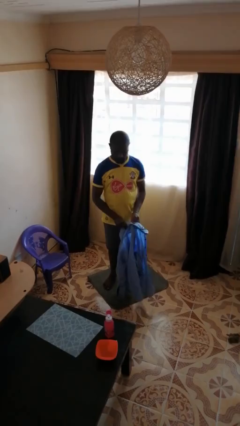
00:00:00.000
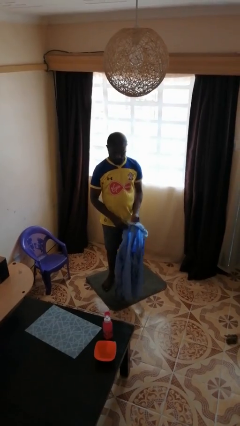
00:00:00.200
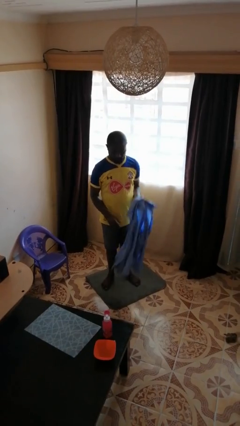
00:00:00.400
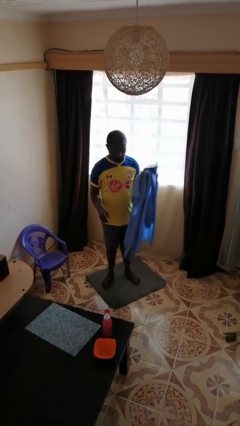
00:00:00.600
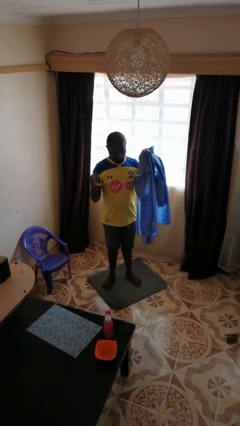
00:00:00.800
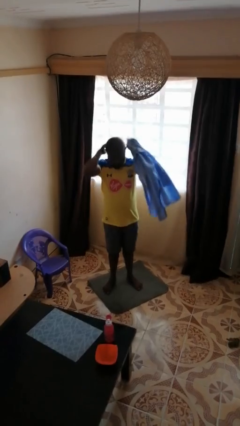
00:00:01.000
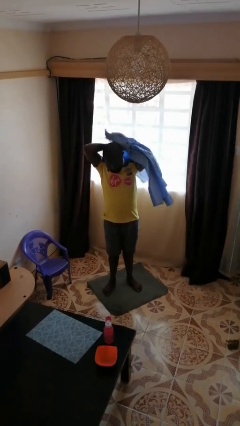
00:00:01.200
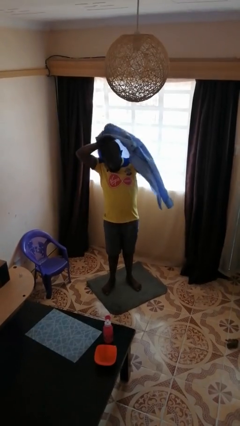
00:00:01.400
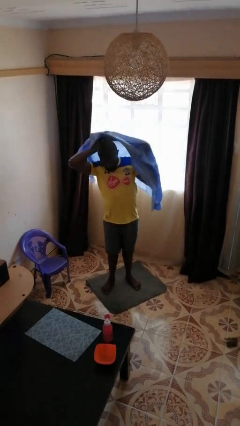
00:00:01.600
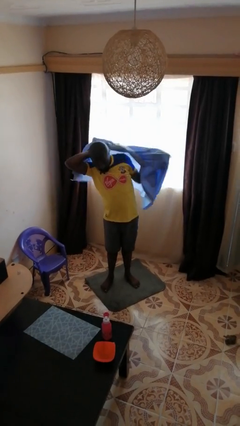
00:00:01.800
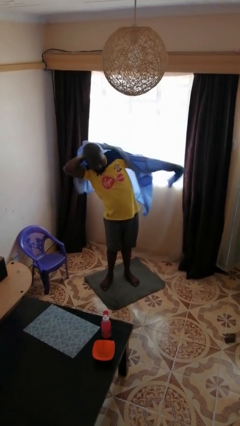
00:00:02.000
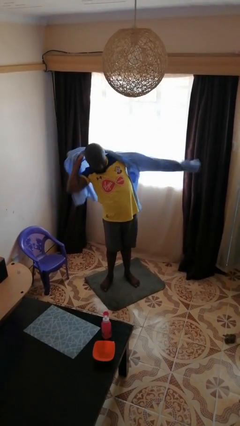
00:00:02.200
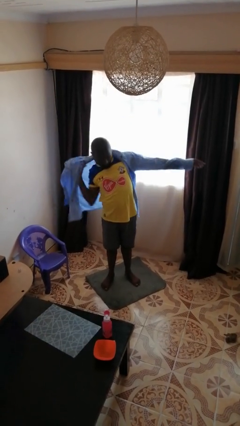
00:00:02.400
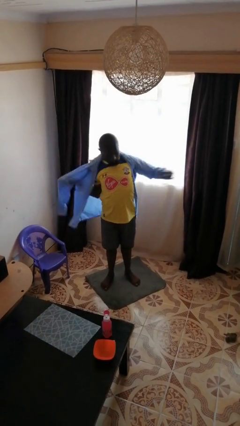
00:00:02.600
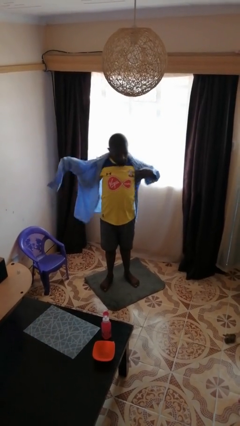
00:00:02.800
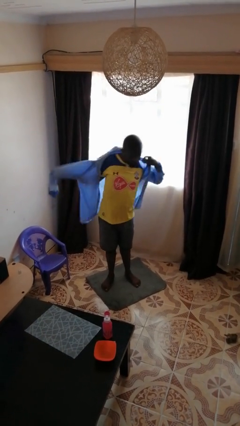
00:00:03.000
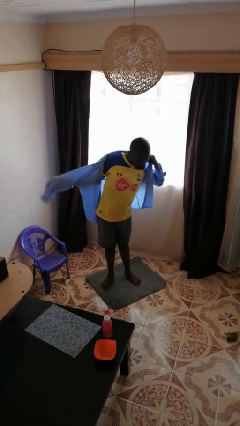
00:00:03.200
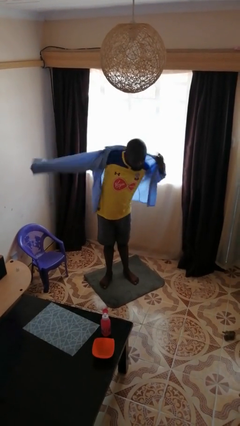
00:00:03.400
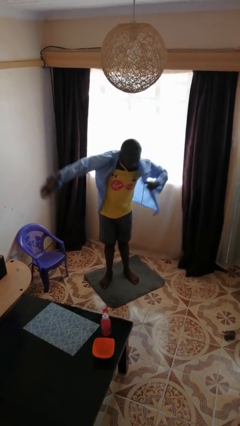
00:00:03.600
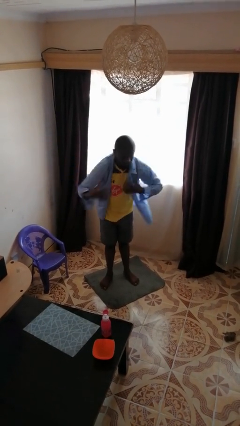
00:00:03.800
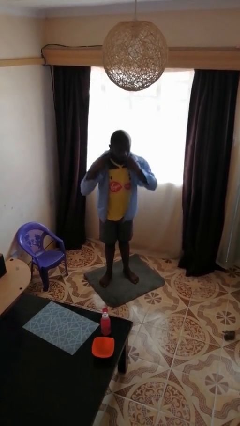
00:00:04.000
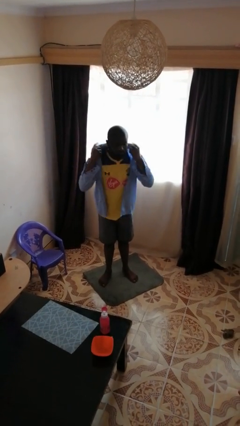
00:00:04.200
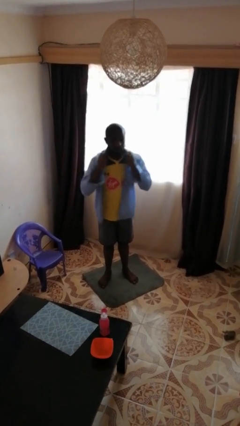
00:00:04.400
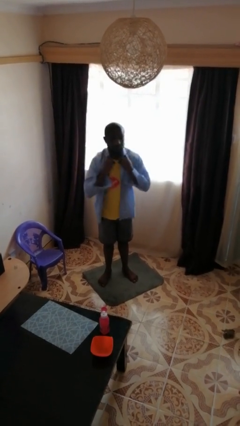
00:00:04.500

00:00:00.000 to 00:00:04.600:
person puts on shirt

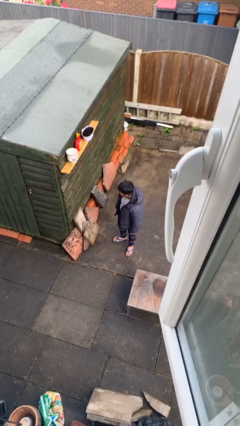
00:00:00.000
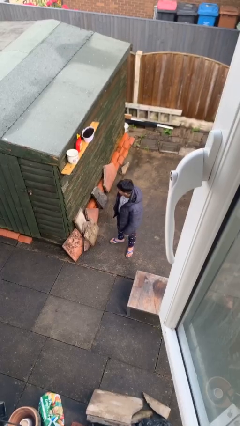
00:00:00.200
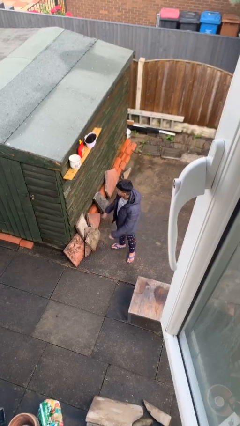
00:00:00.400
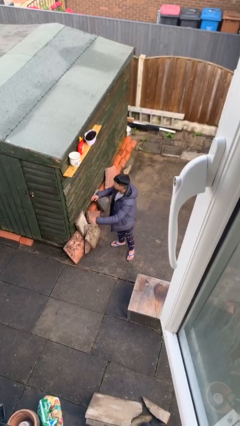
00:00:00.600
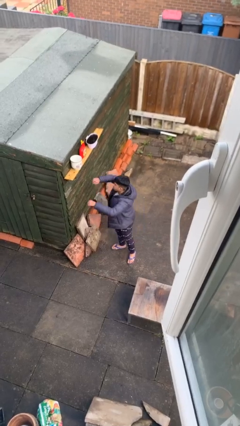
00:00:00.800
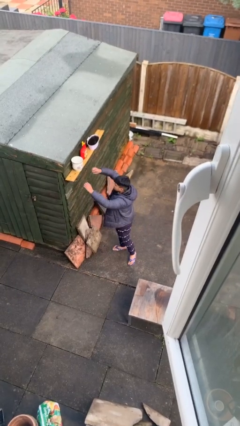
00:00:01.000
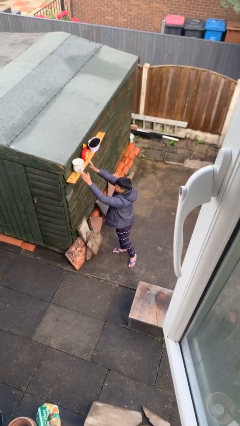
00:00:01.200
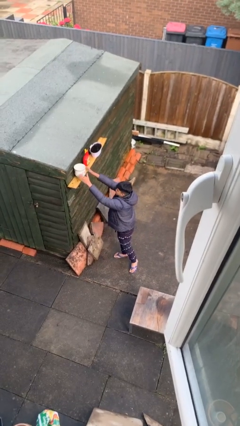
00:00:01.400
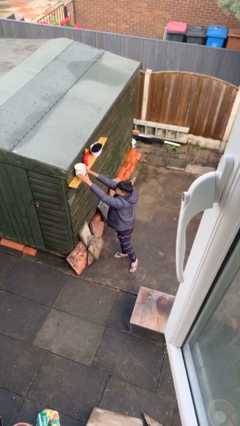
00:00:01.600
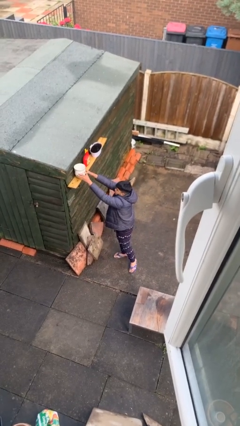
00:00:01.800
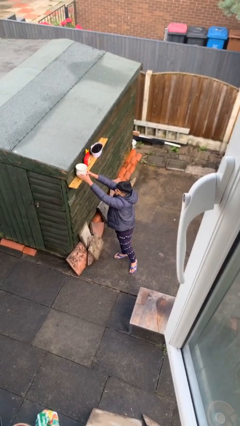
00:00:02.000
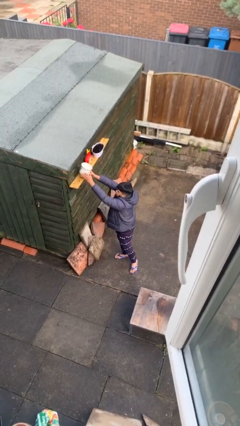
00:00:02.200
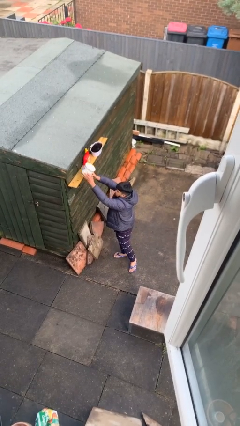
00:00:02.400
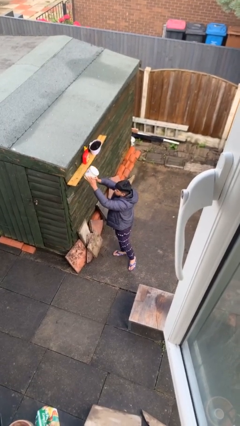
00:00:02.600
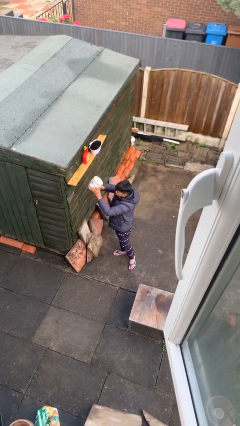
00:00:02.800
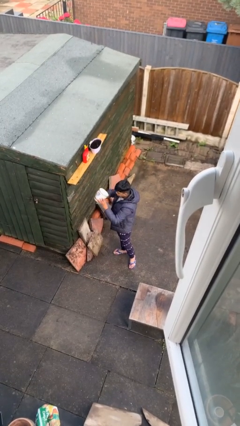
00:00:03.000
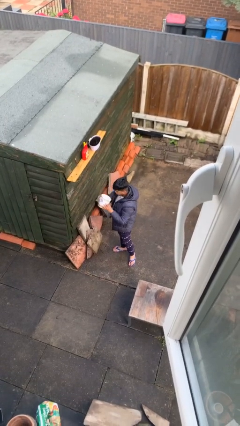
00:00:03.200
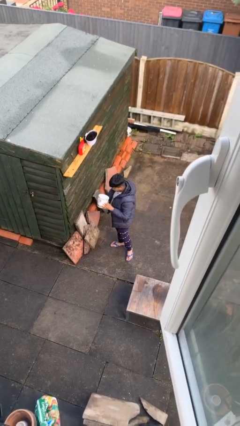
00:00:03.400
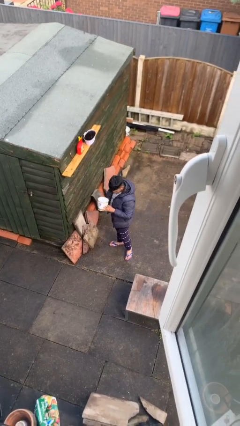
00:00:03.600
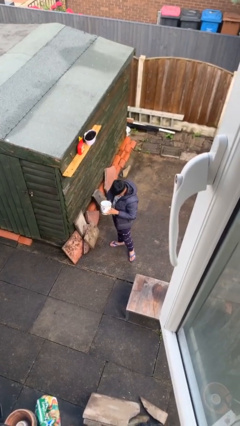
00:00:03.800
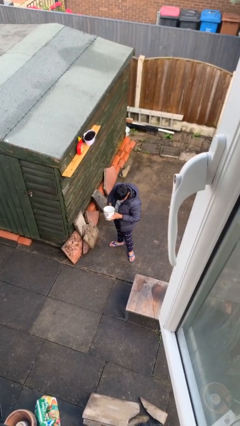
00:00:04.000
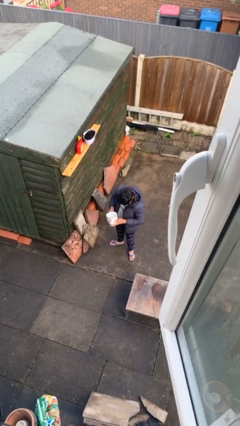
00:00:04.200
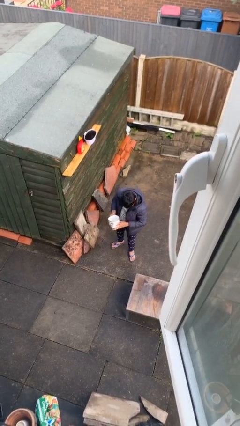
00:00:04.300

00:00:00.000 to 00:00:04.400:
person picks up object from shelf

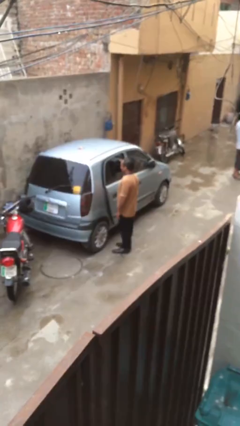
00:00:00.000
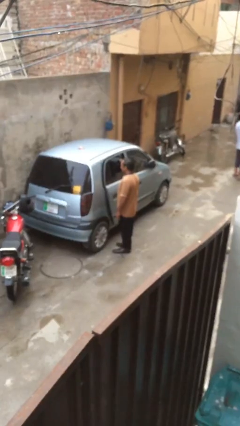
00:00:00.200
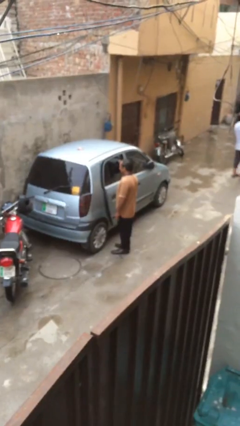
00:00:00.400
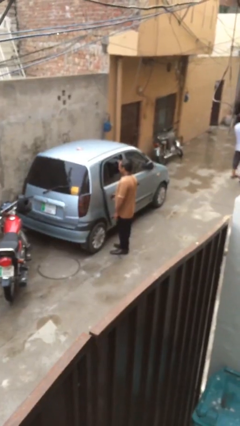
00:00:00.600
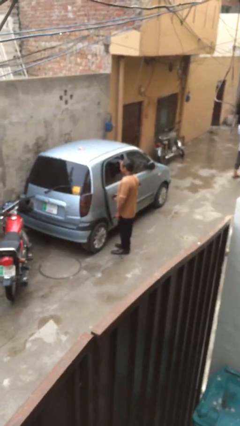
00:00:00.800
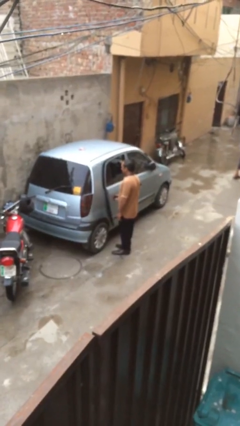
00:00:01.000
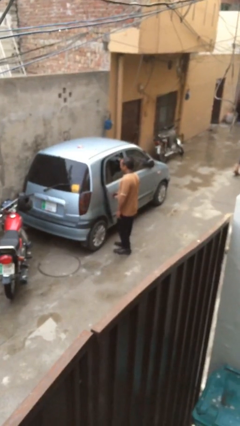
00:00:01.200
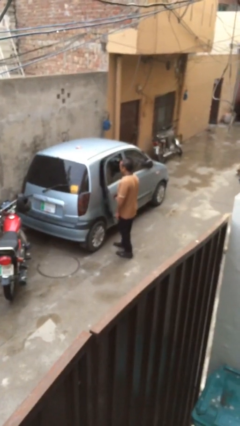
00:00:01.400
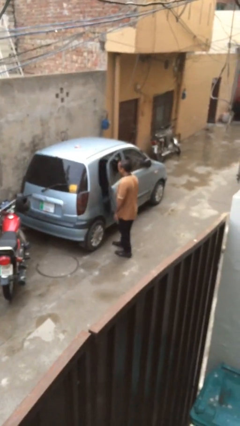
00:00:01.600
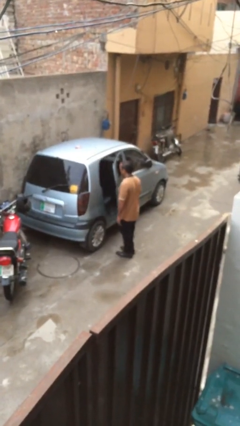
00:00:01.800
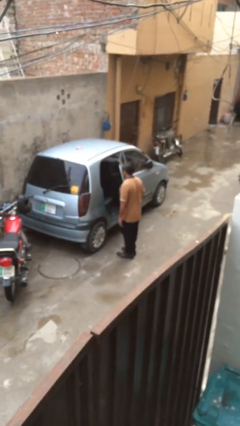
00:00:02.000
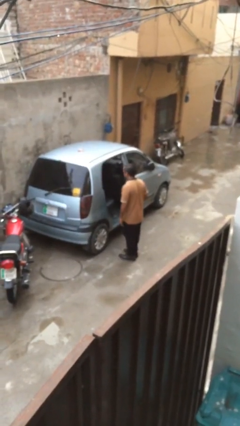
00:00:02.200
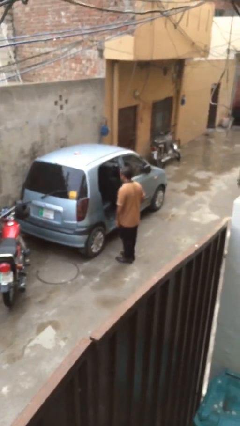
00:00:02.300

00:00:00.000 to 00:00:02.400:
person opens car door

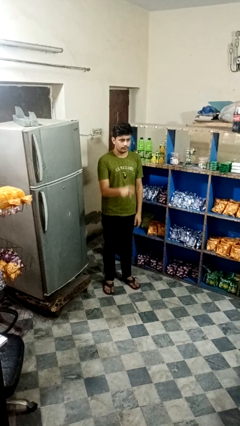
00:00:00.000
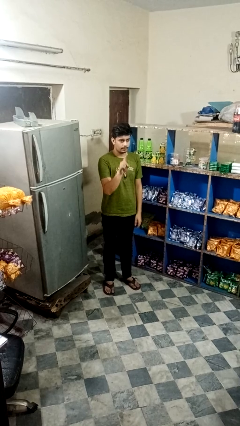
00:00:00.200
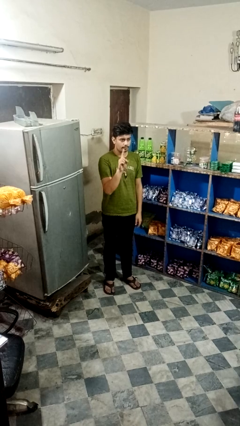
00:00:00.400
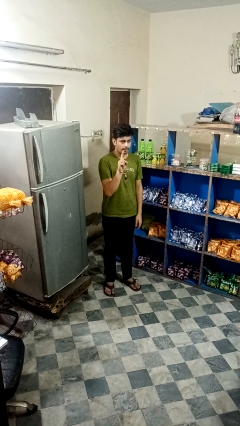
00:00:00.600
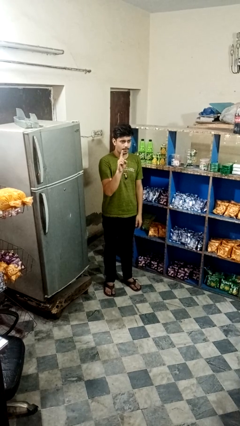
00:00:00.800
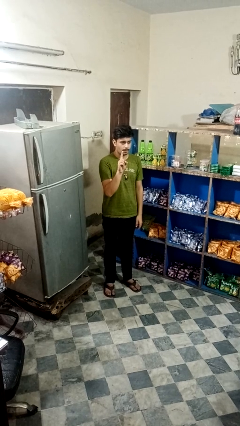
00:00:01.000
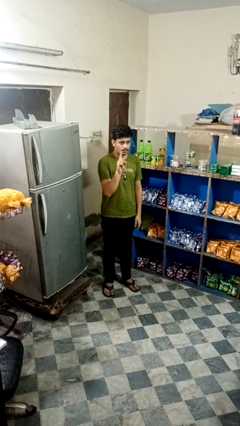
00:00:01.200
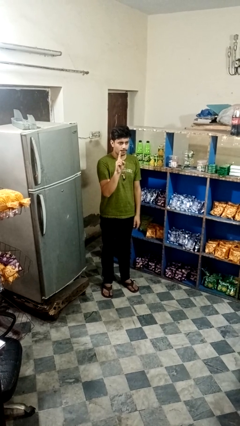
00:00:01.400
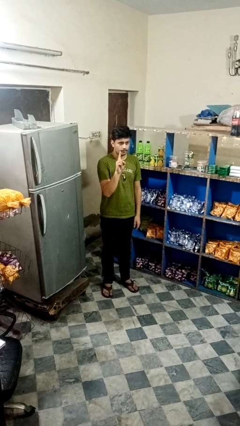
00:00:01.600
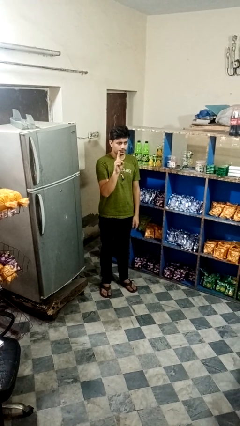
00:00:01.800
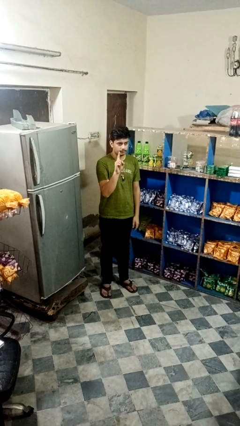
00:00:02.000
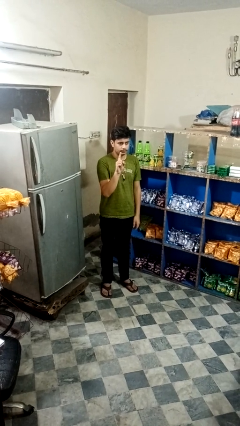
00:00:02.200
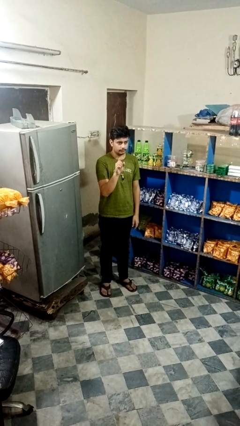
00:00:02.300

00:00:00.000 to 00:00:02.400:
person gestures number one

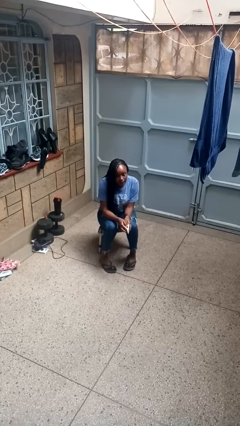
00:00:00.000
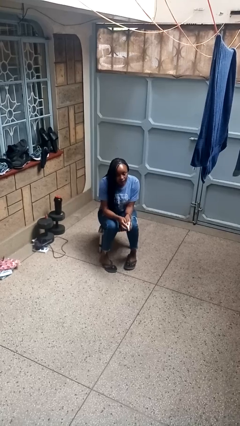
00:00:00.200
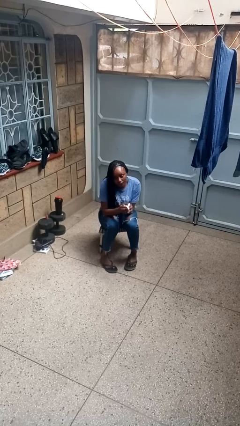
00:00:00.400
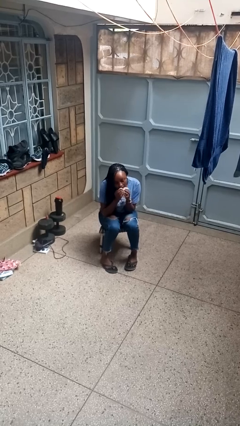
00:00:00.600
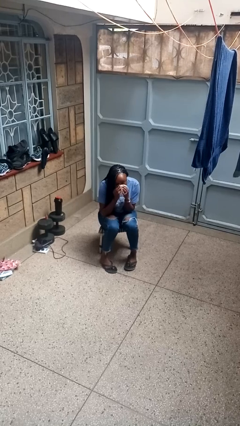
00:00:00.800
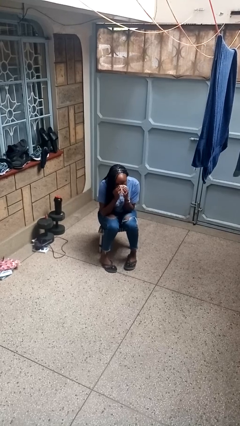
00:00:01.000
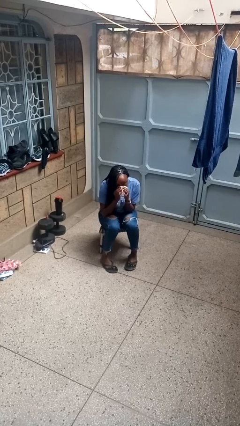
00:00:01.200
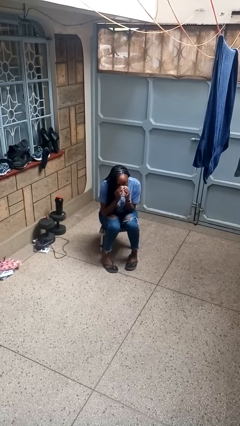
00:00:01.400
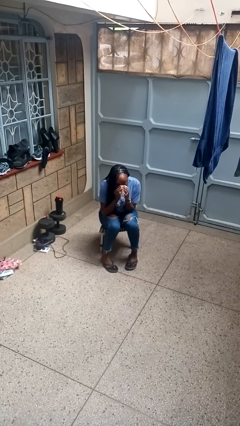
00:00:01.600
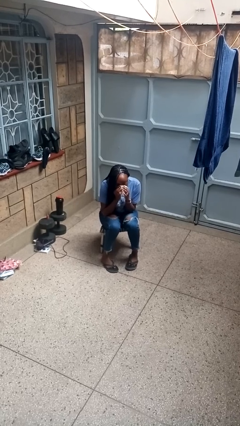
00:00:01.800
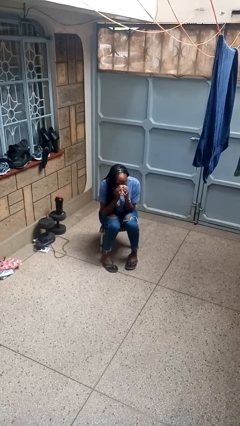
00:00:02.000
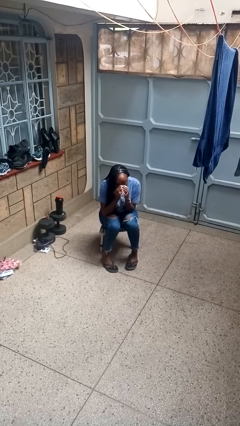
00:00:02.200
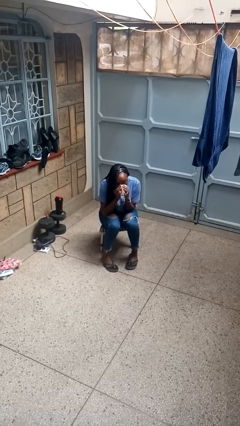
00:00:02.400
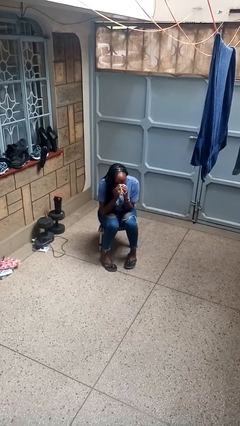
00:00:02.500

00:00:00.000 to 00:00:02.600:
person blows nose

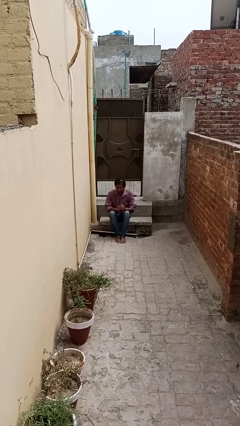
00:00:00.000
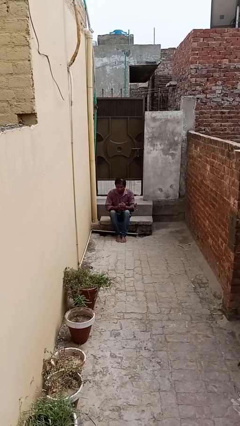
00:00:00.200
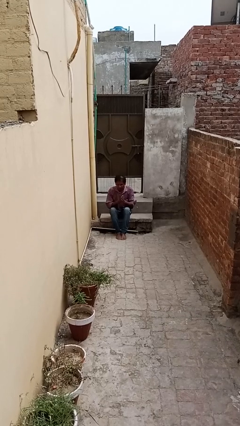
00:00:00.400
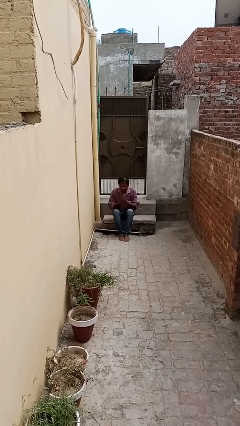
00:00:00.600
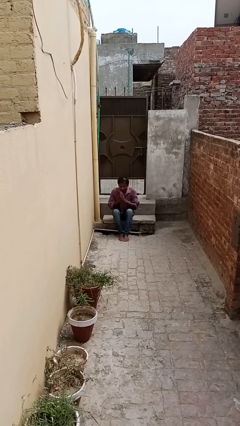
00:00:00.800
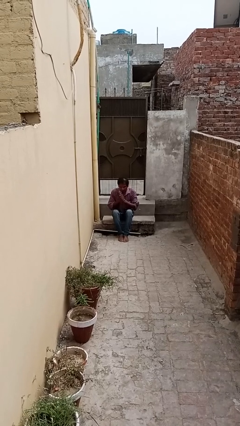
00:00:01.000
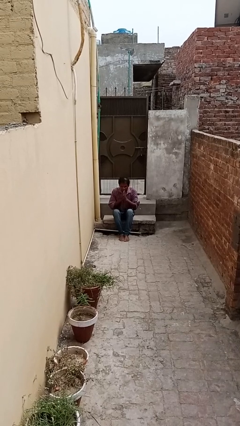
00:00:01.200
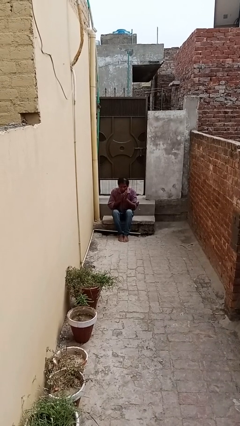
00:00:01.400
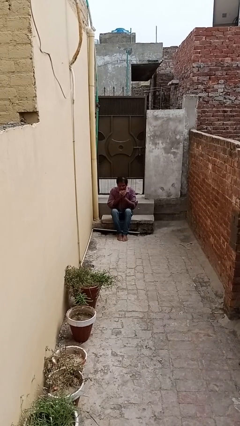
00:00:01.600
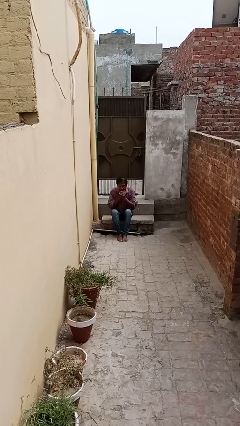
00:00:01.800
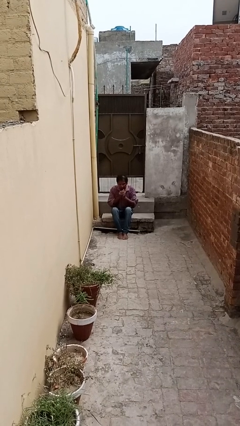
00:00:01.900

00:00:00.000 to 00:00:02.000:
person blows into hands
